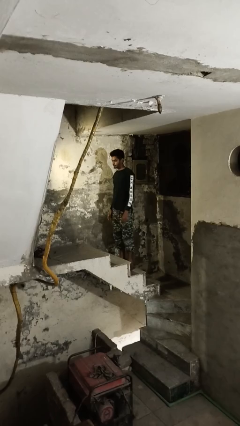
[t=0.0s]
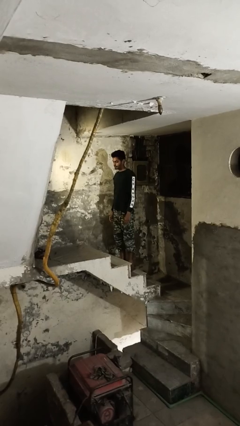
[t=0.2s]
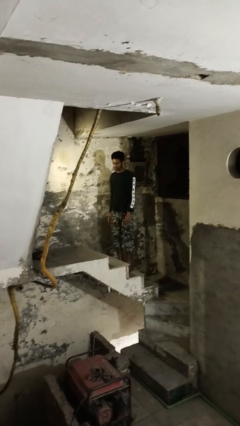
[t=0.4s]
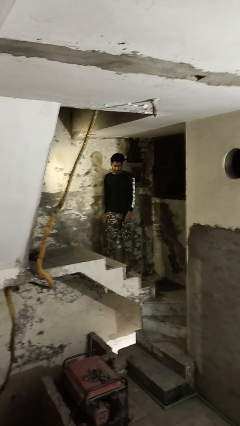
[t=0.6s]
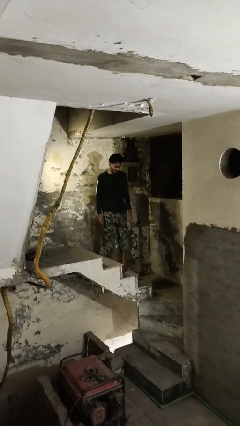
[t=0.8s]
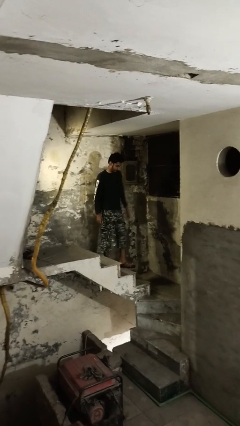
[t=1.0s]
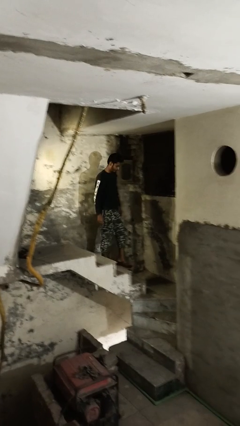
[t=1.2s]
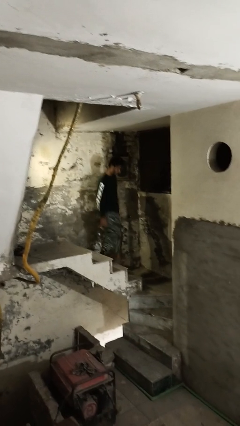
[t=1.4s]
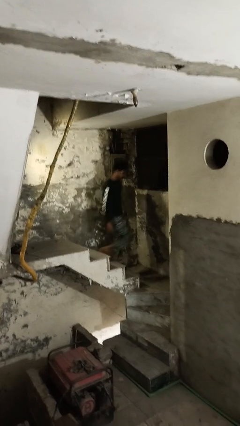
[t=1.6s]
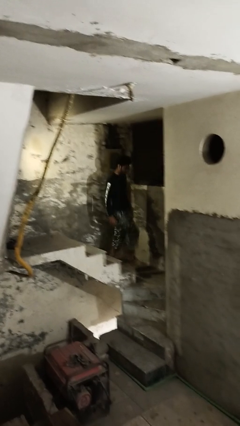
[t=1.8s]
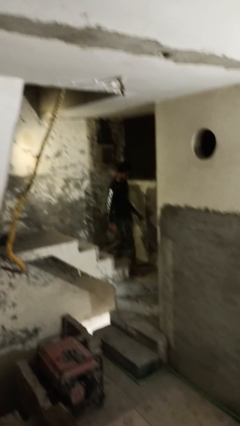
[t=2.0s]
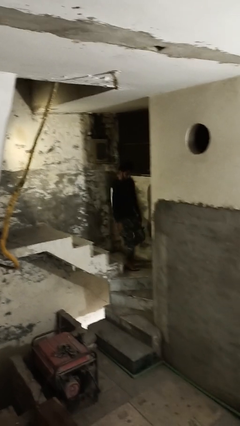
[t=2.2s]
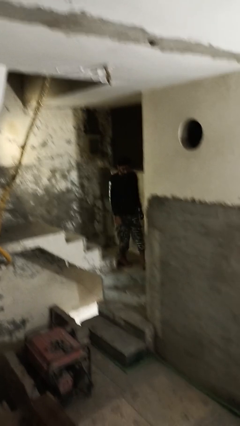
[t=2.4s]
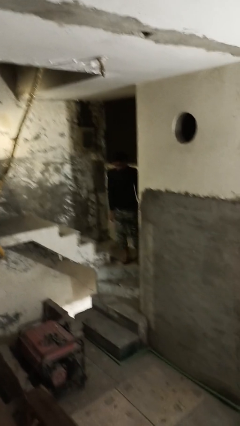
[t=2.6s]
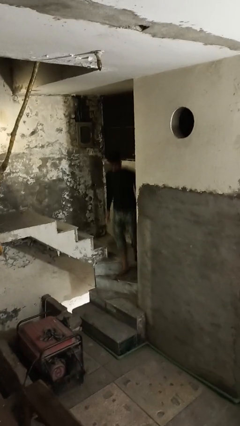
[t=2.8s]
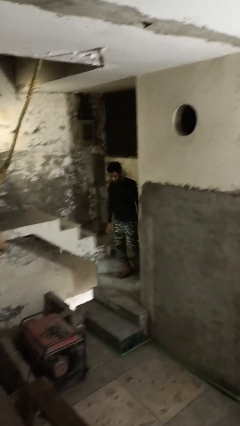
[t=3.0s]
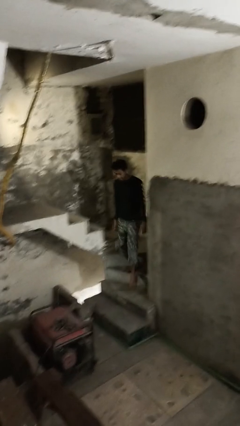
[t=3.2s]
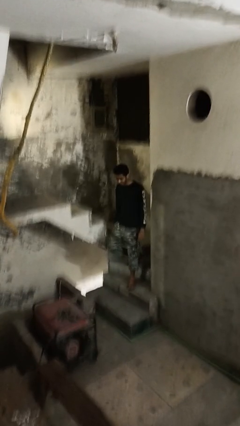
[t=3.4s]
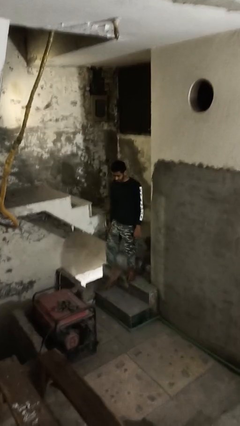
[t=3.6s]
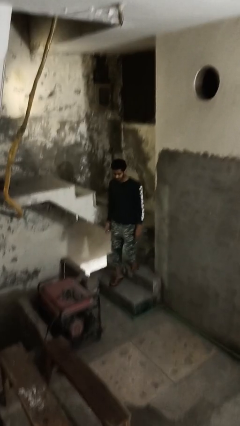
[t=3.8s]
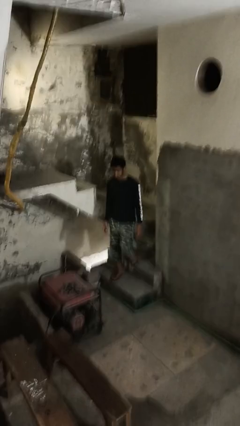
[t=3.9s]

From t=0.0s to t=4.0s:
person climbs down stairs

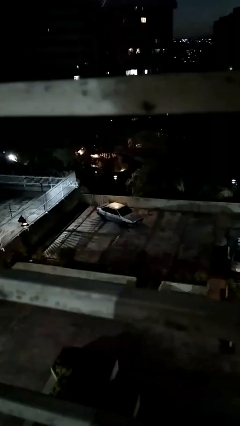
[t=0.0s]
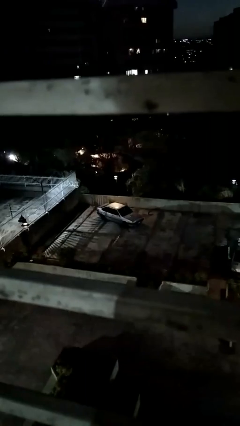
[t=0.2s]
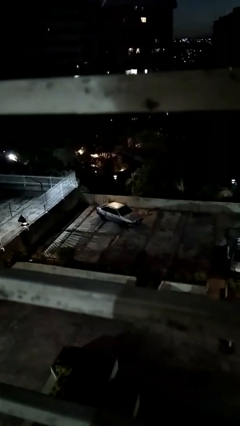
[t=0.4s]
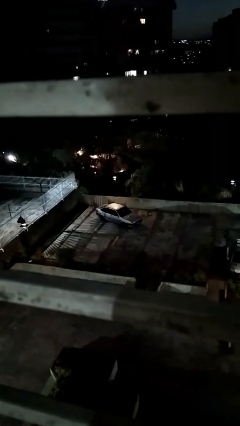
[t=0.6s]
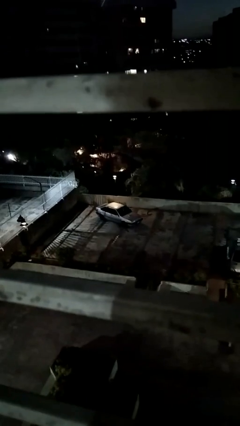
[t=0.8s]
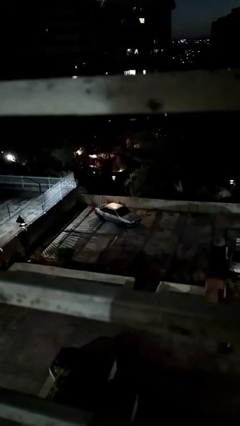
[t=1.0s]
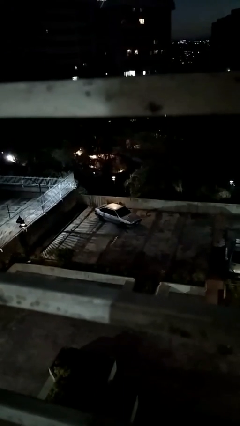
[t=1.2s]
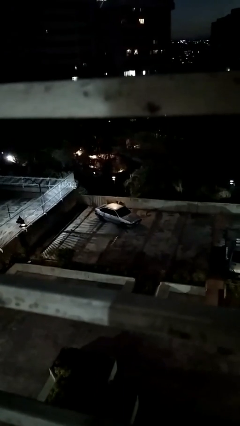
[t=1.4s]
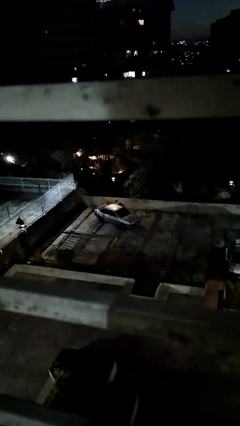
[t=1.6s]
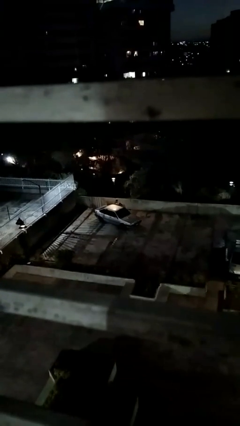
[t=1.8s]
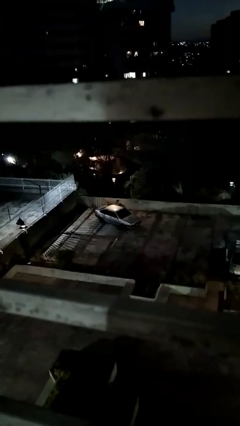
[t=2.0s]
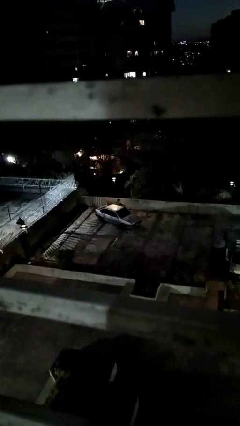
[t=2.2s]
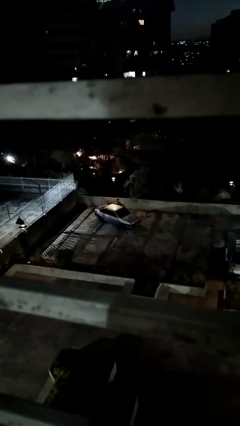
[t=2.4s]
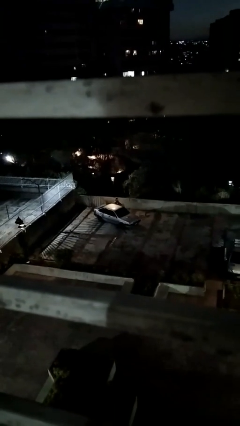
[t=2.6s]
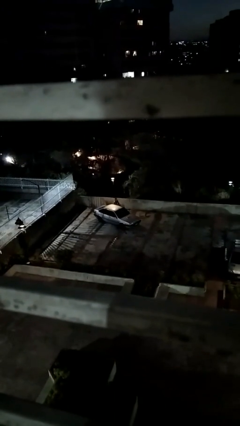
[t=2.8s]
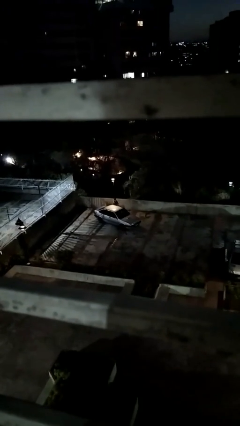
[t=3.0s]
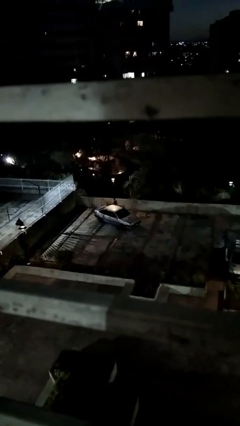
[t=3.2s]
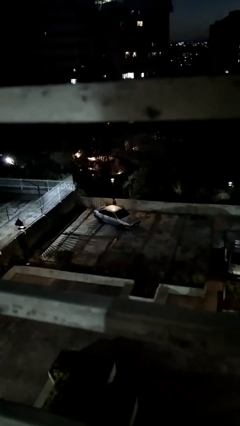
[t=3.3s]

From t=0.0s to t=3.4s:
car drops off person

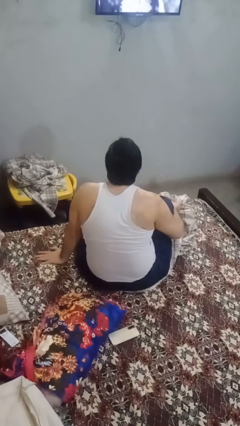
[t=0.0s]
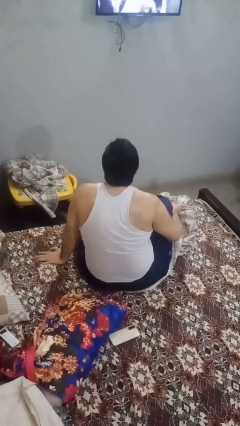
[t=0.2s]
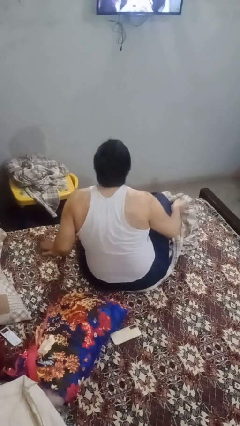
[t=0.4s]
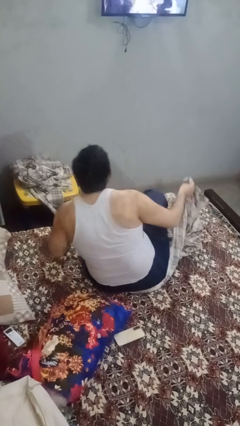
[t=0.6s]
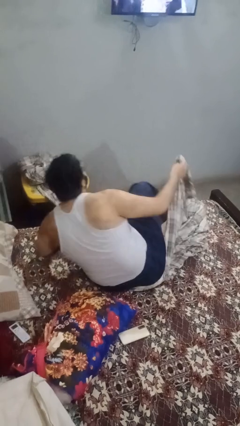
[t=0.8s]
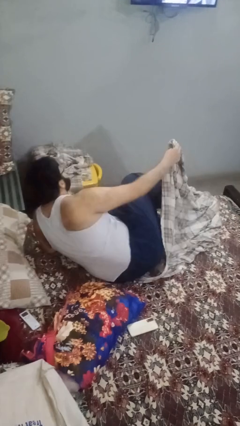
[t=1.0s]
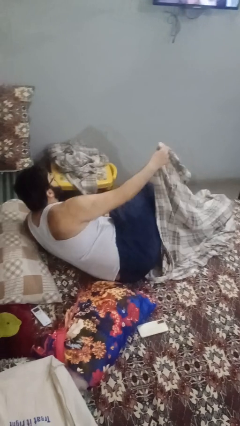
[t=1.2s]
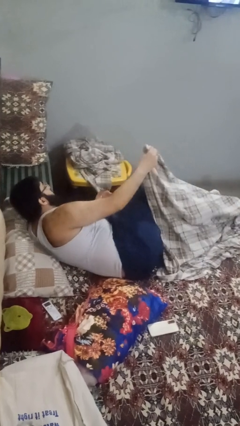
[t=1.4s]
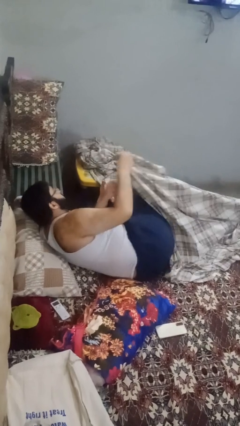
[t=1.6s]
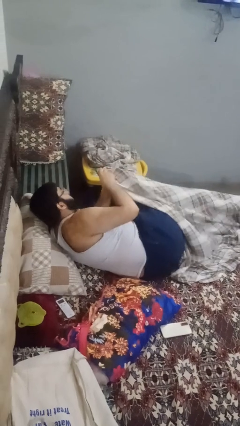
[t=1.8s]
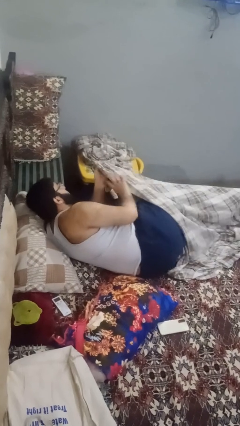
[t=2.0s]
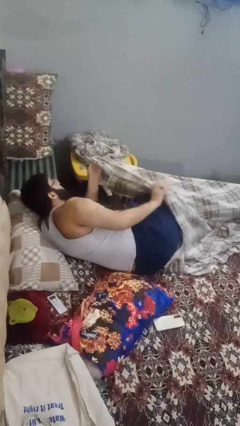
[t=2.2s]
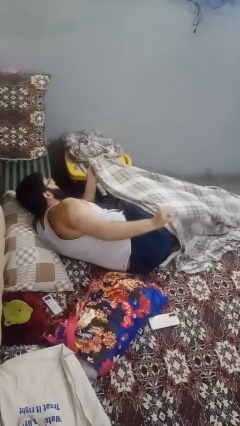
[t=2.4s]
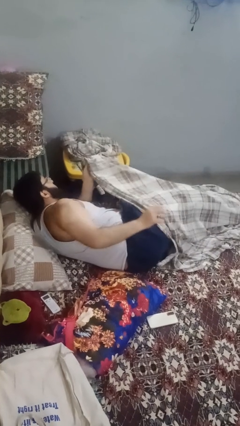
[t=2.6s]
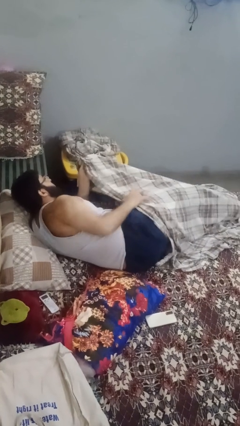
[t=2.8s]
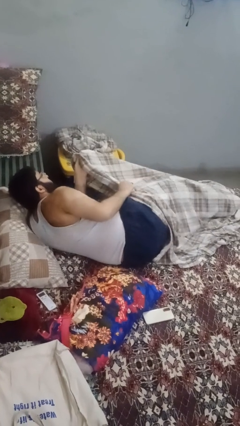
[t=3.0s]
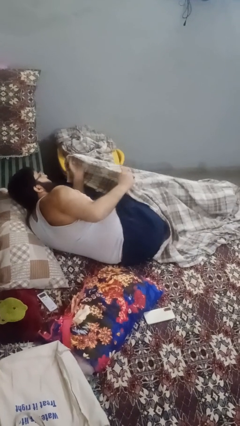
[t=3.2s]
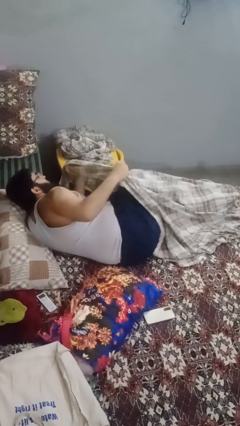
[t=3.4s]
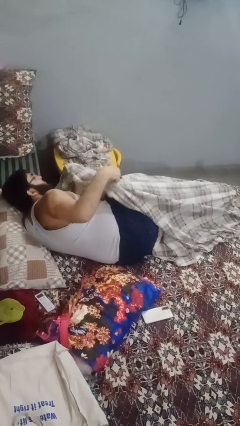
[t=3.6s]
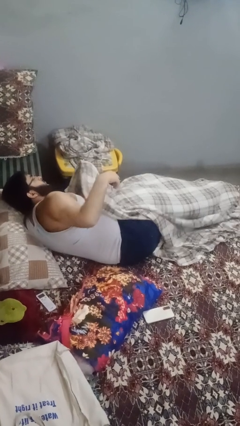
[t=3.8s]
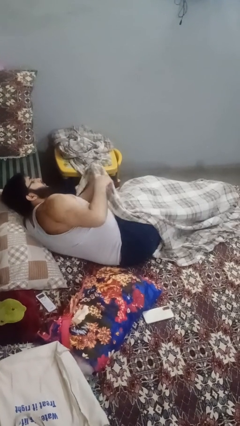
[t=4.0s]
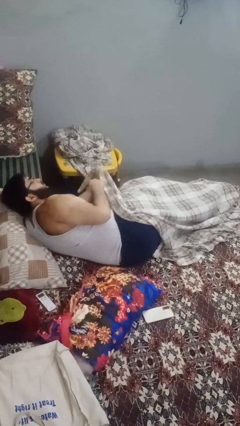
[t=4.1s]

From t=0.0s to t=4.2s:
person covers with blanket

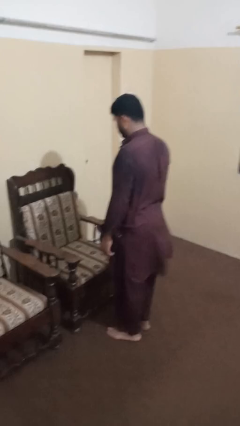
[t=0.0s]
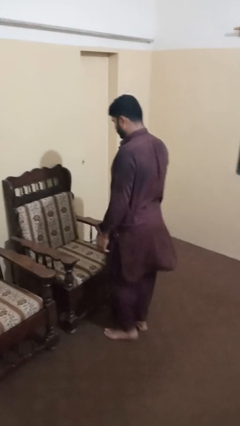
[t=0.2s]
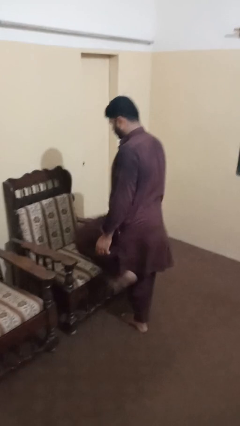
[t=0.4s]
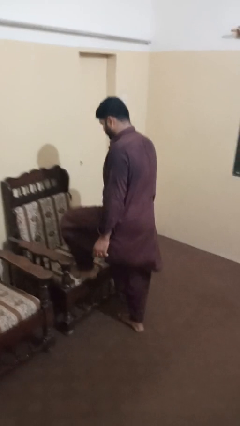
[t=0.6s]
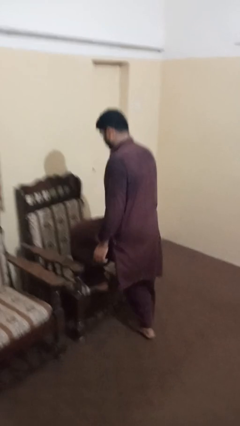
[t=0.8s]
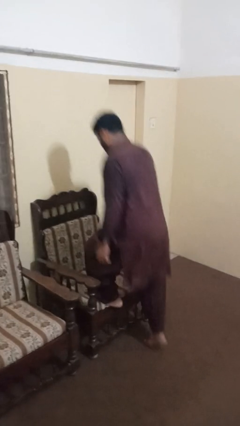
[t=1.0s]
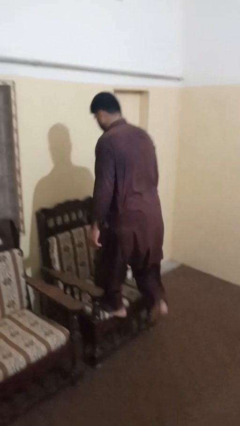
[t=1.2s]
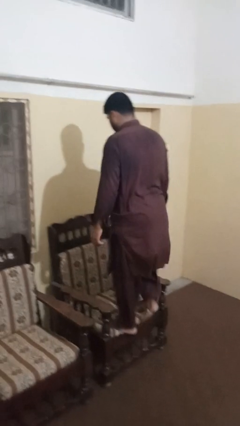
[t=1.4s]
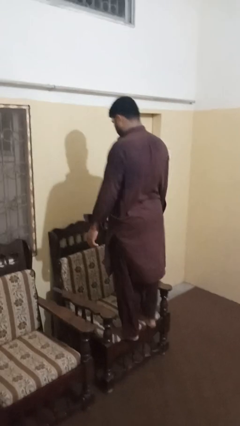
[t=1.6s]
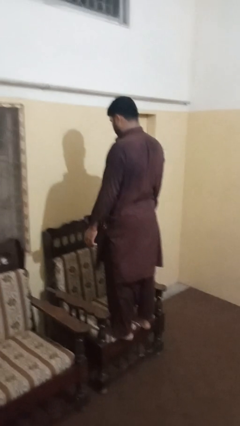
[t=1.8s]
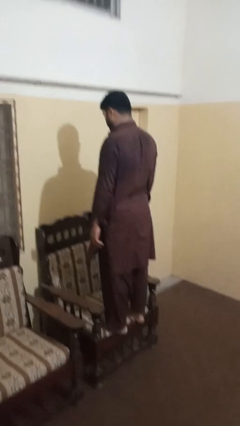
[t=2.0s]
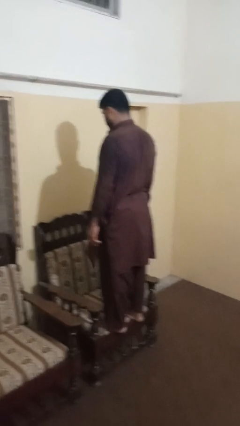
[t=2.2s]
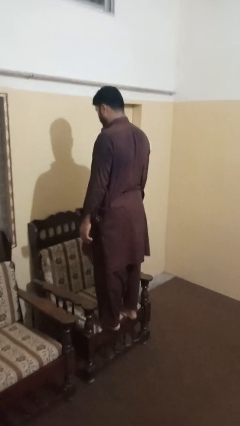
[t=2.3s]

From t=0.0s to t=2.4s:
person climbs on chair

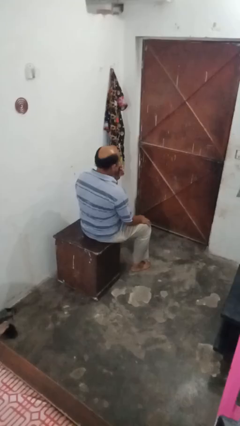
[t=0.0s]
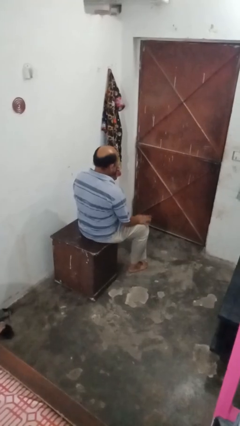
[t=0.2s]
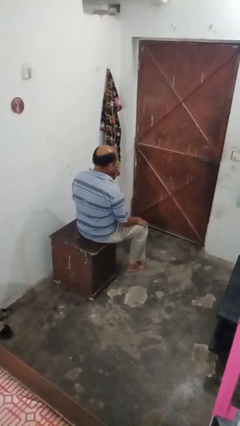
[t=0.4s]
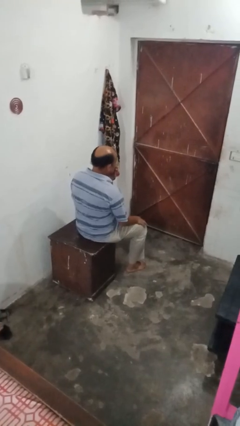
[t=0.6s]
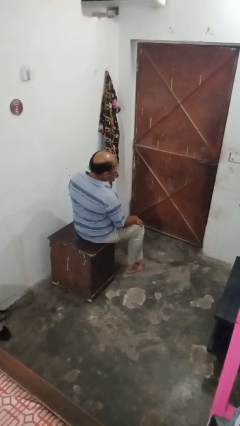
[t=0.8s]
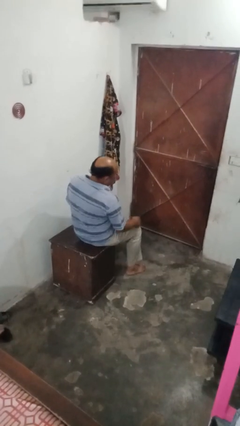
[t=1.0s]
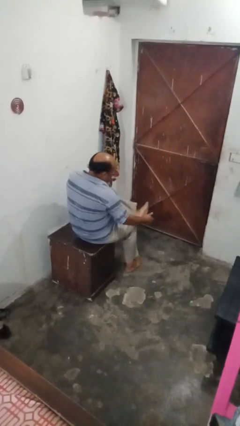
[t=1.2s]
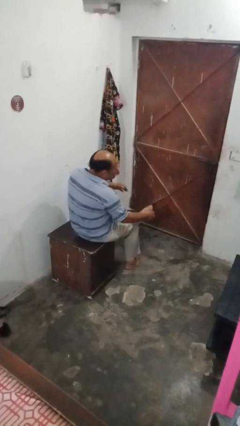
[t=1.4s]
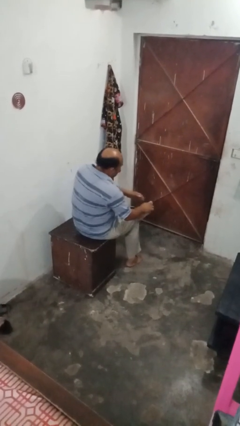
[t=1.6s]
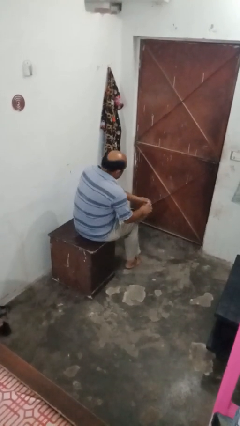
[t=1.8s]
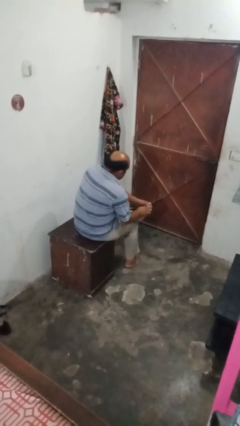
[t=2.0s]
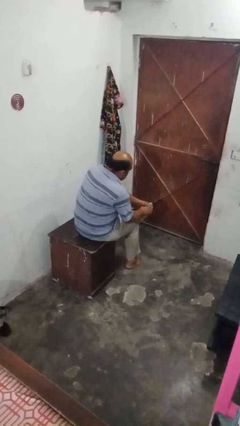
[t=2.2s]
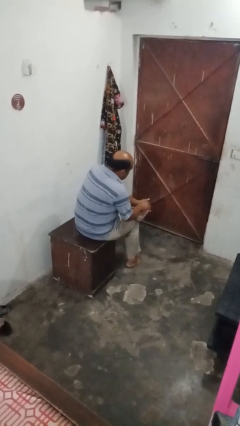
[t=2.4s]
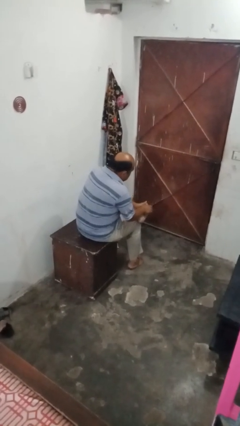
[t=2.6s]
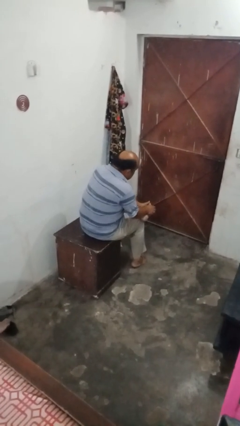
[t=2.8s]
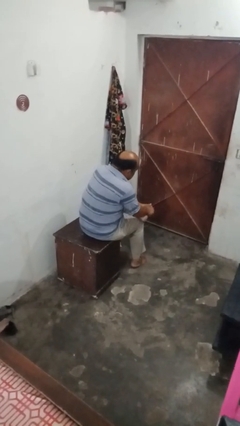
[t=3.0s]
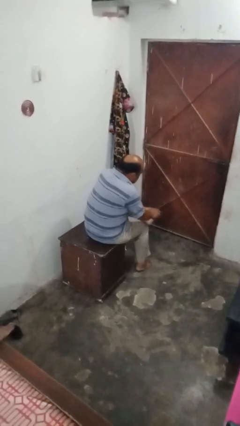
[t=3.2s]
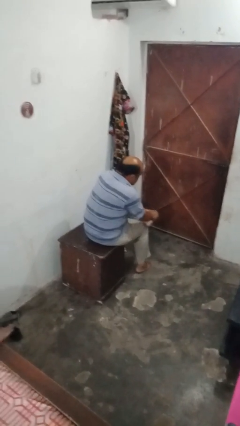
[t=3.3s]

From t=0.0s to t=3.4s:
person rubs foot
